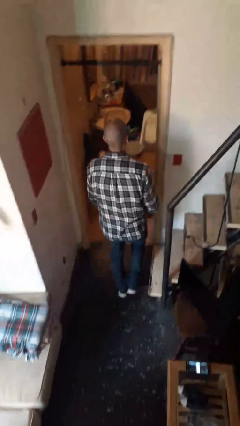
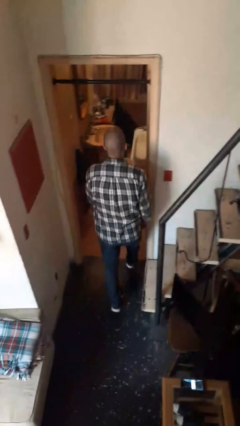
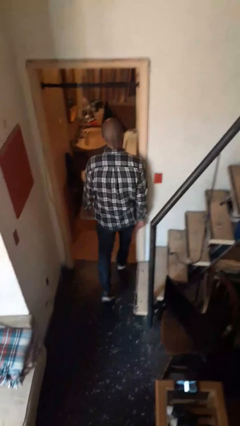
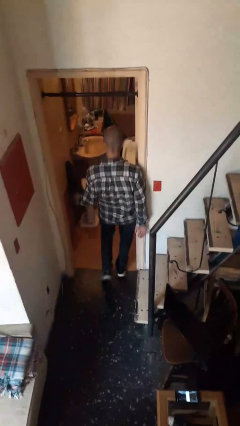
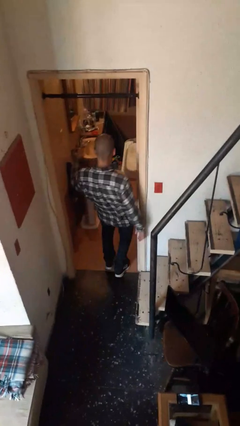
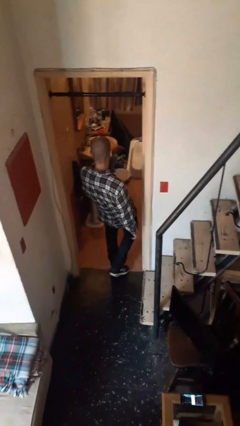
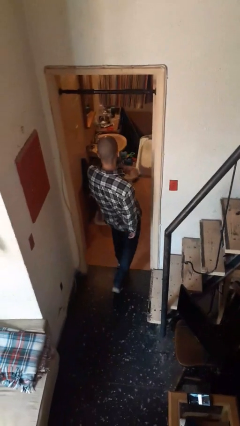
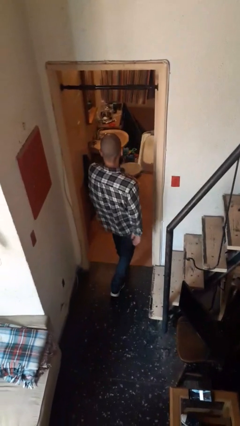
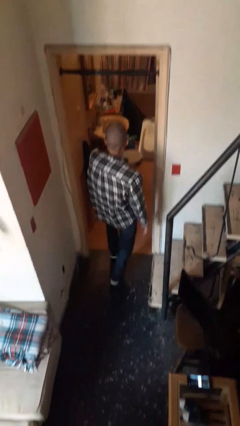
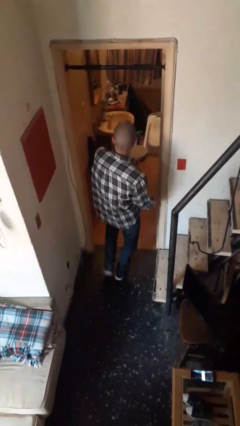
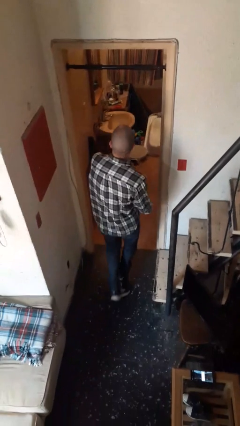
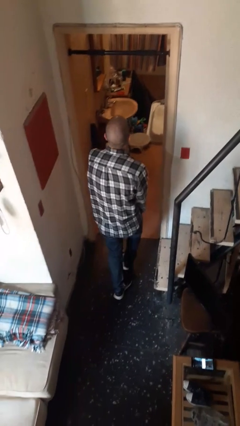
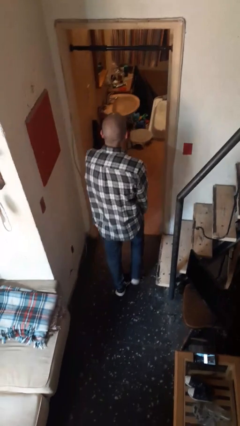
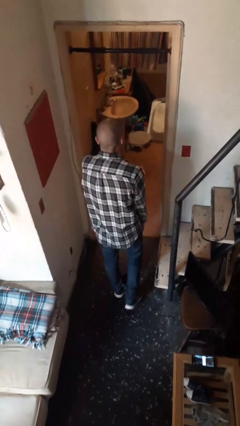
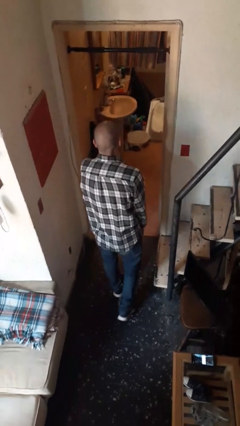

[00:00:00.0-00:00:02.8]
person bumps into wall

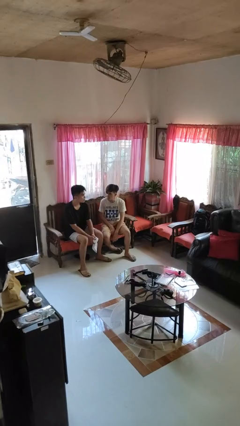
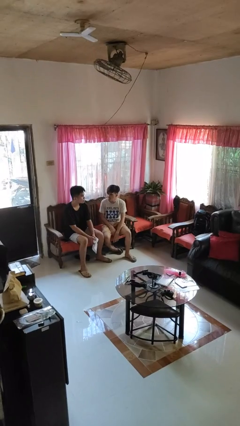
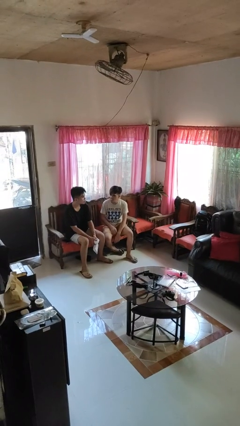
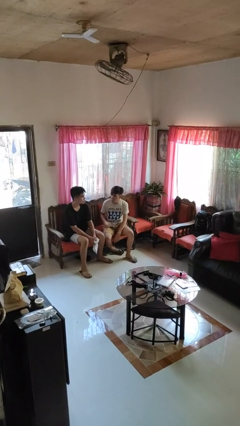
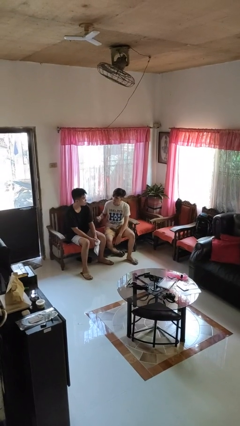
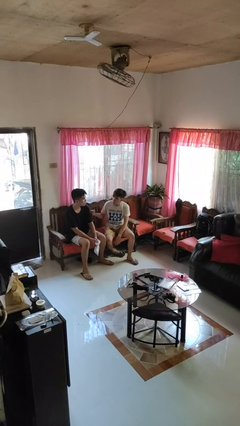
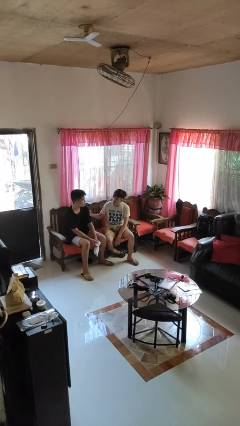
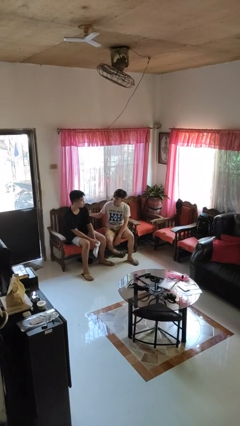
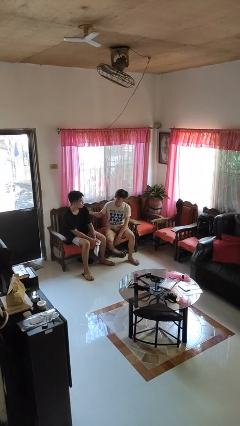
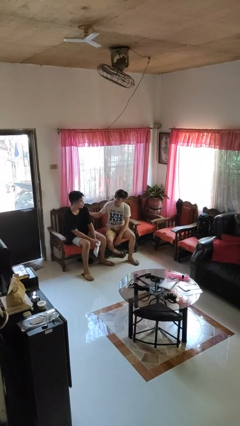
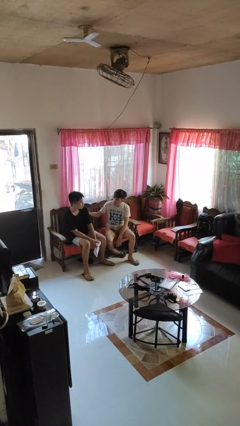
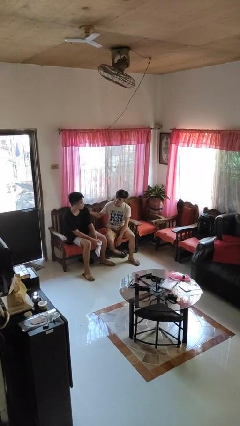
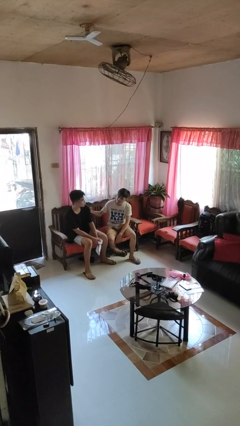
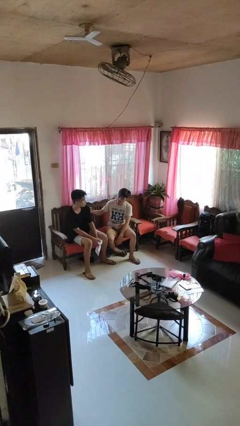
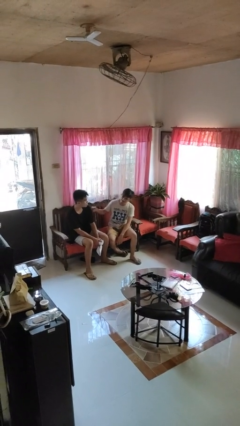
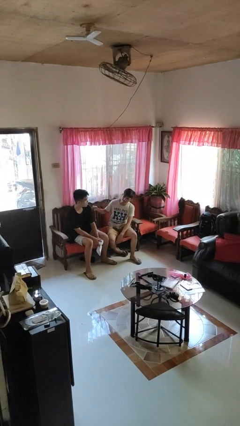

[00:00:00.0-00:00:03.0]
person pounds shoulders of person

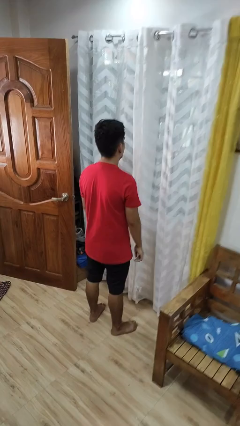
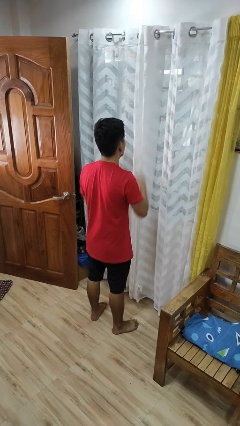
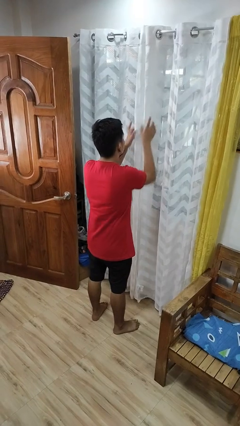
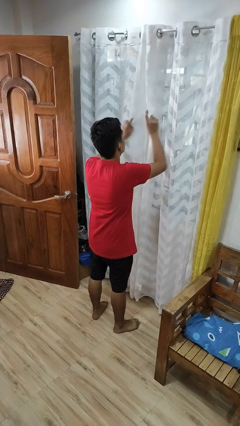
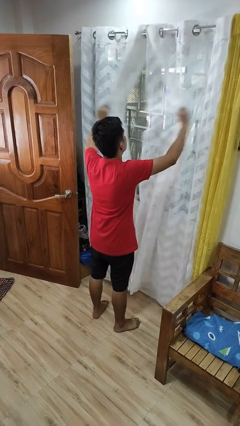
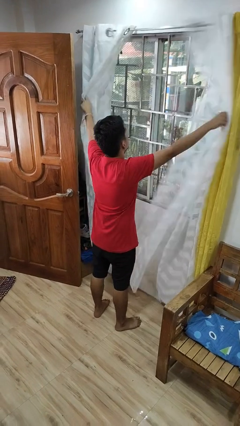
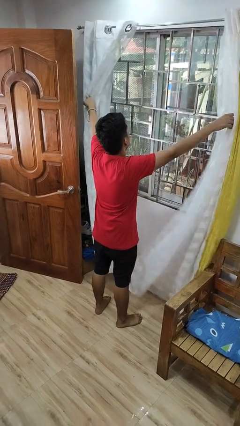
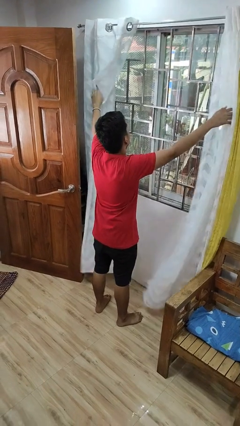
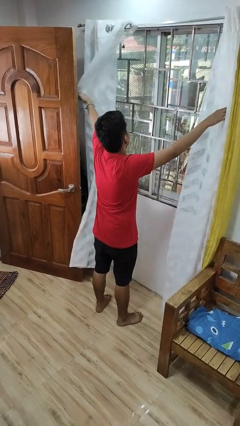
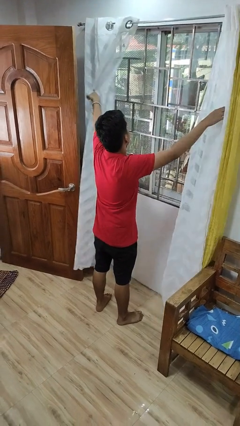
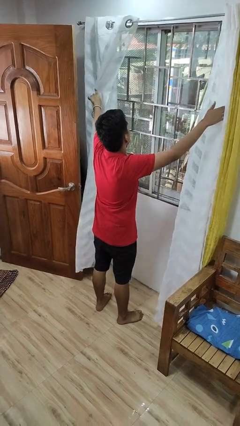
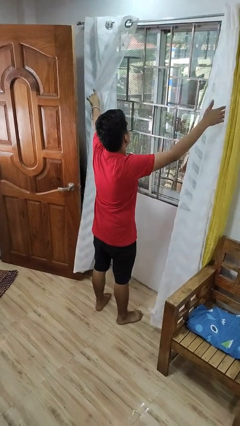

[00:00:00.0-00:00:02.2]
person opens curtains

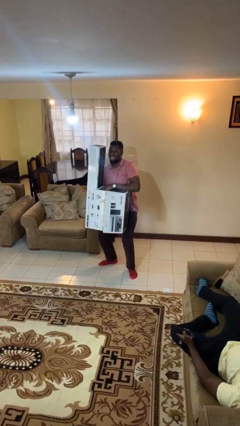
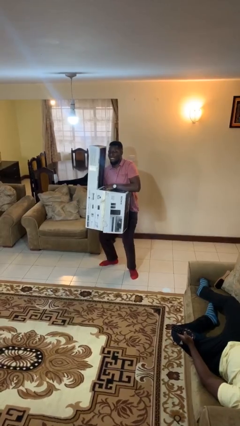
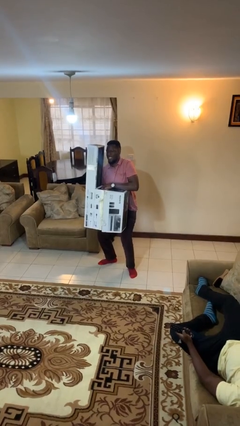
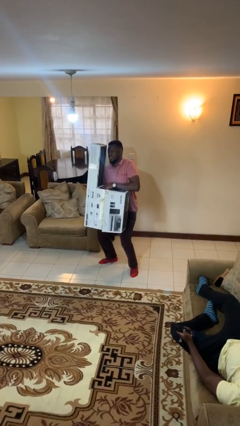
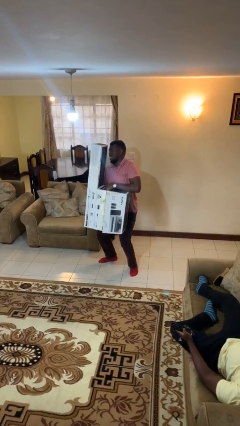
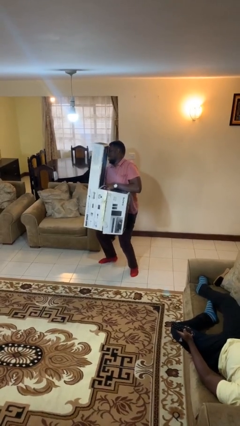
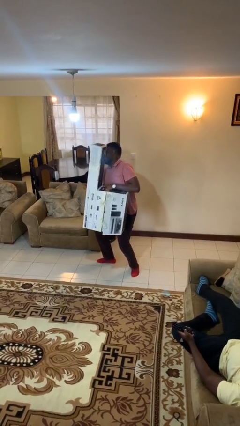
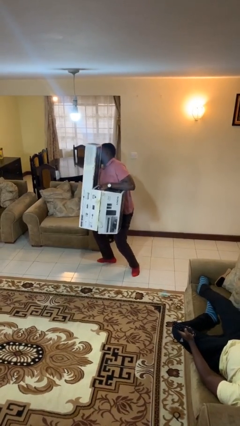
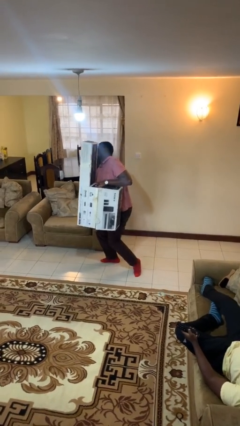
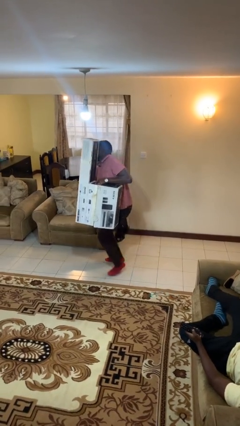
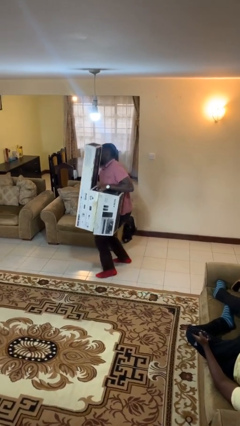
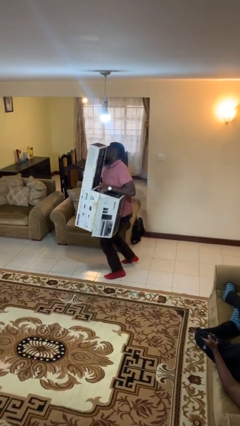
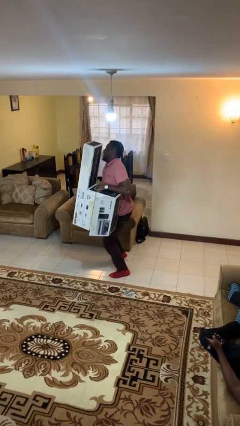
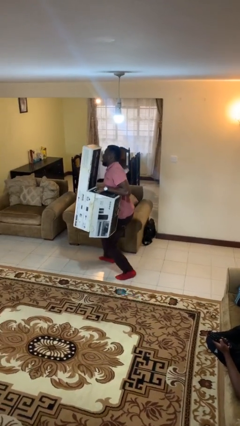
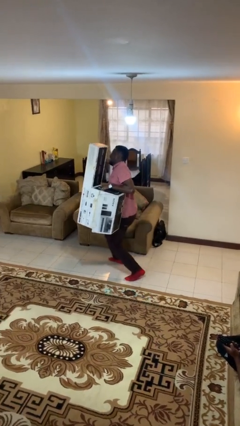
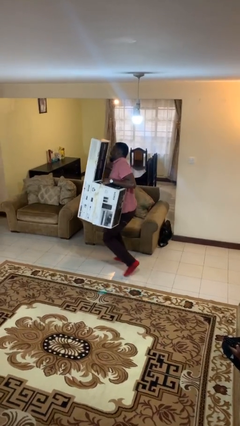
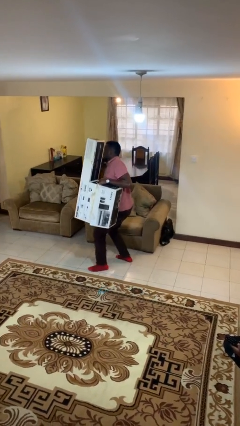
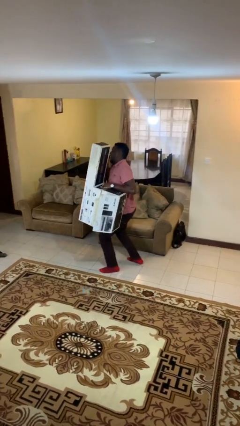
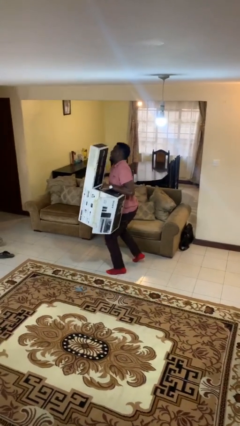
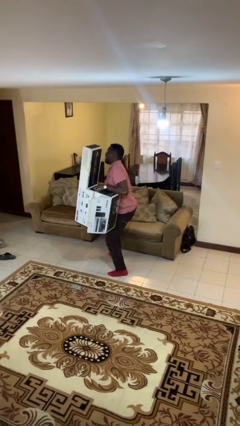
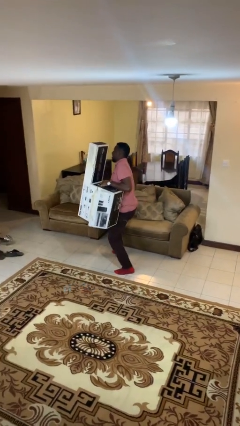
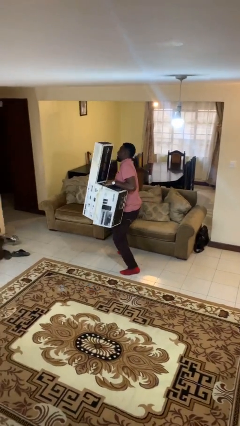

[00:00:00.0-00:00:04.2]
person carries heavy object

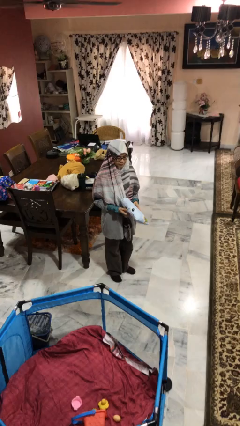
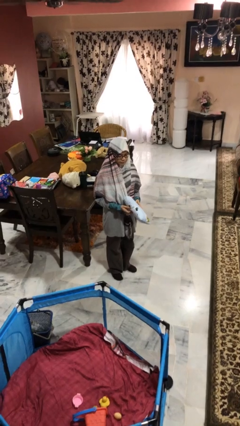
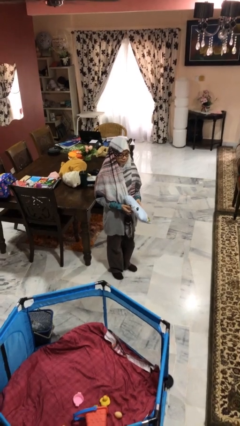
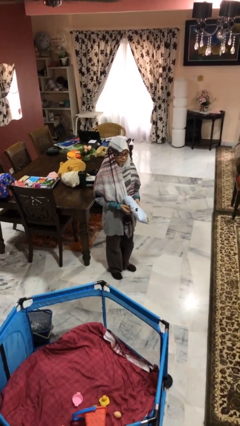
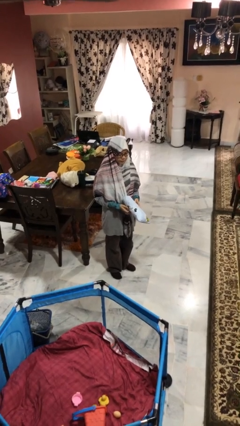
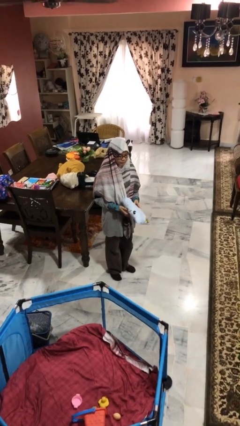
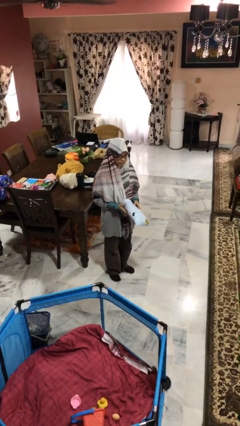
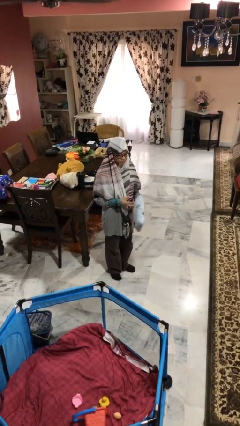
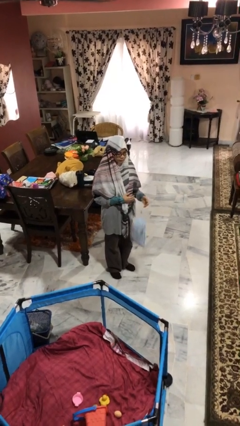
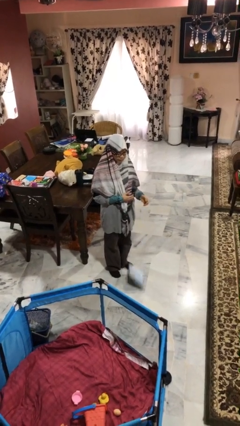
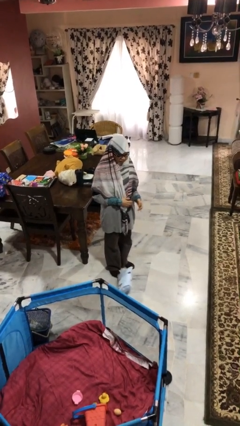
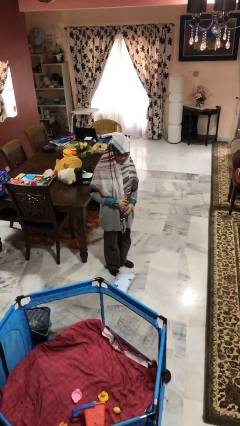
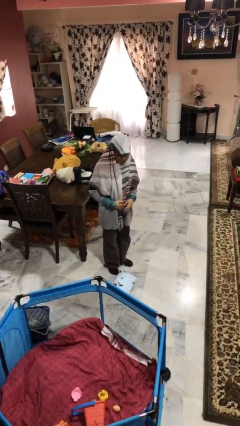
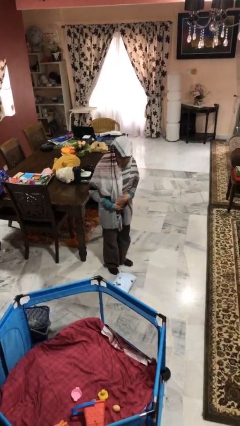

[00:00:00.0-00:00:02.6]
person drops object

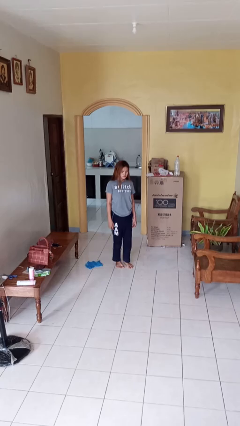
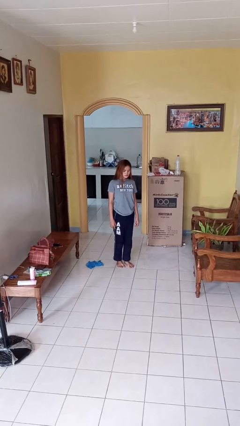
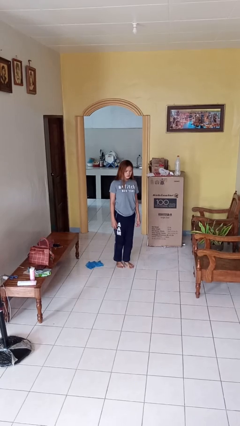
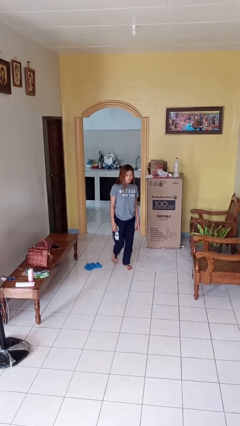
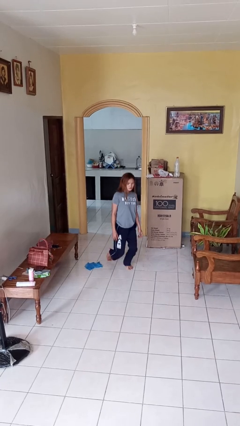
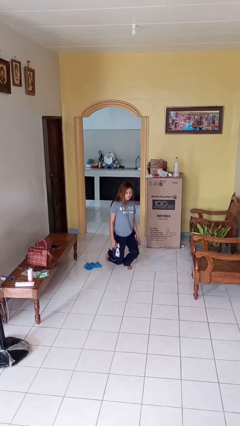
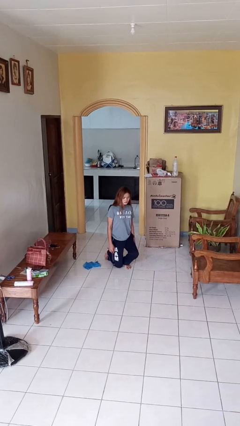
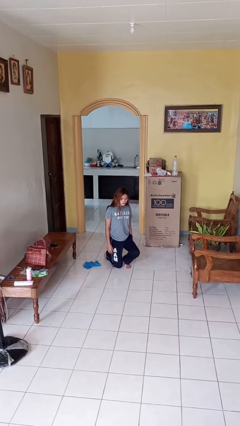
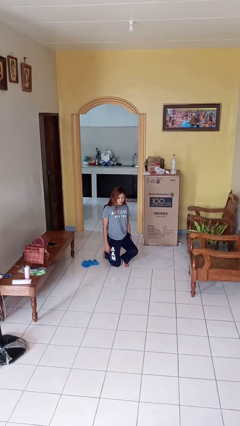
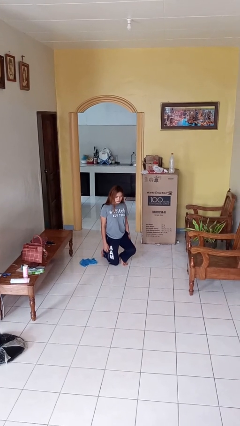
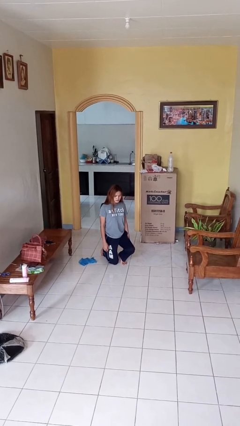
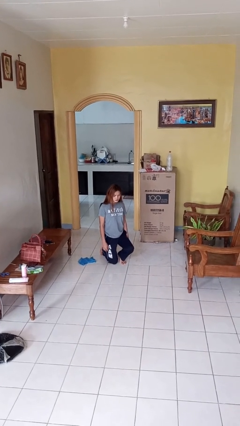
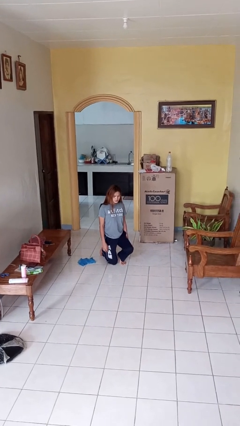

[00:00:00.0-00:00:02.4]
person kneels
